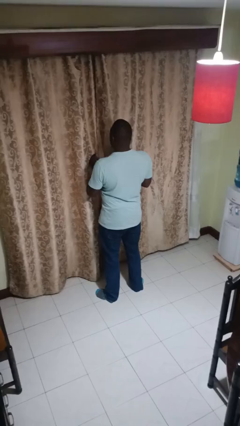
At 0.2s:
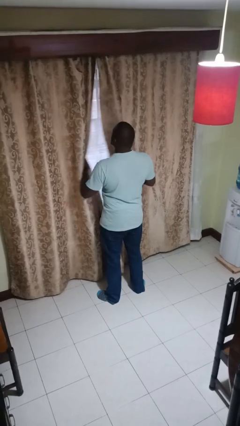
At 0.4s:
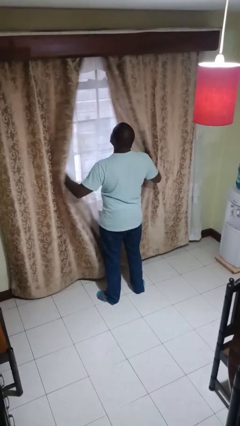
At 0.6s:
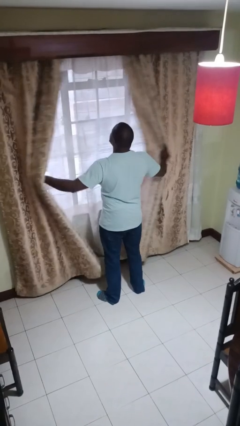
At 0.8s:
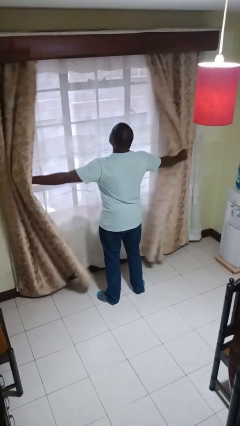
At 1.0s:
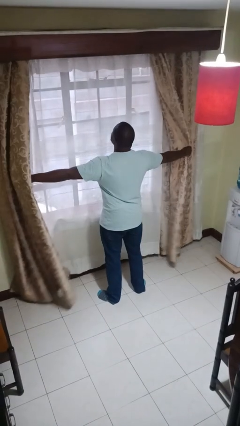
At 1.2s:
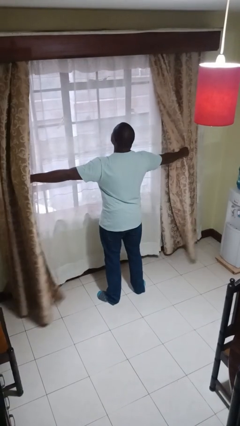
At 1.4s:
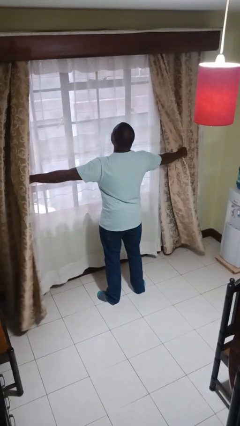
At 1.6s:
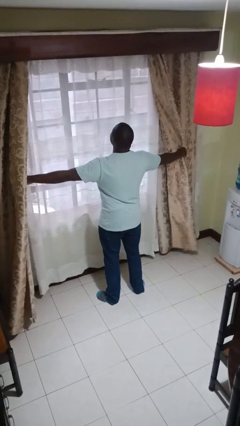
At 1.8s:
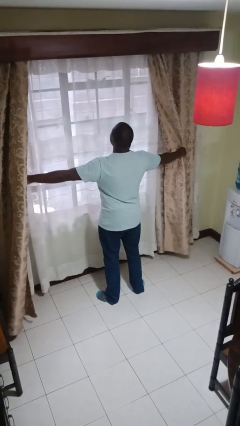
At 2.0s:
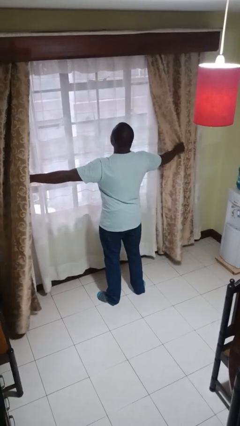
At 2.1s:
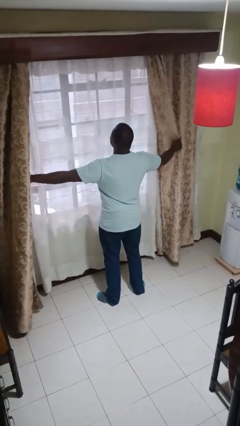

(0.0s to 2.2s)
person opens curtains

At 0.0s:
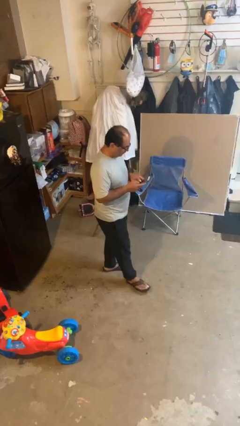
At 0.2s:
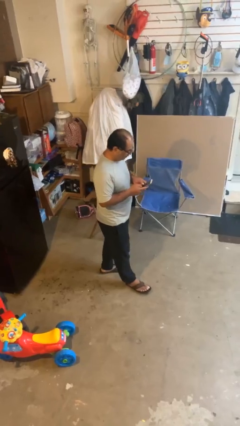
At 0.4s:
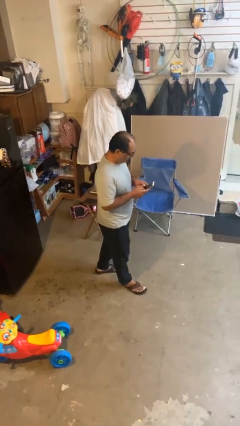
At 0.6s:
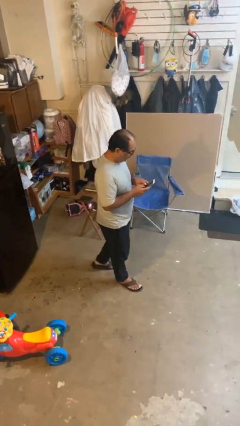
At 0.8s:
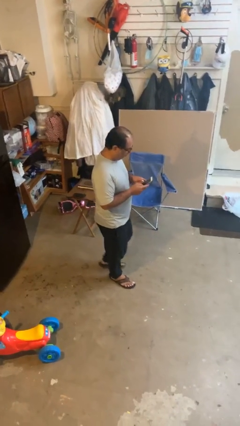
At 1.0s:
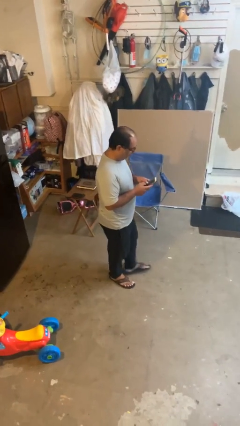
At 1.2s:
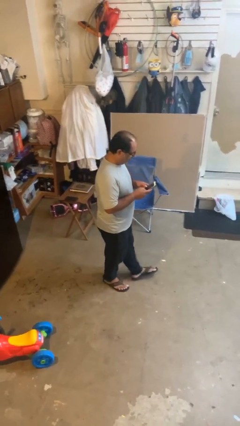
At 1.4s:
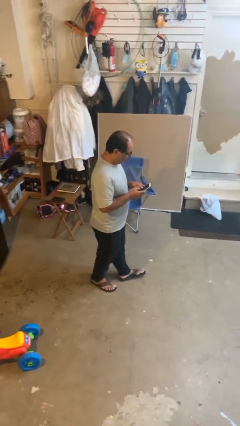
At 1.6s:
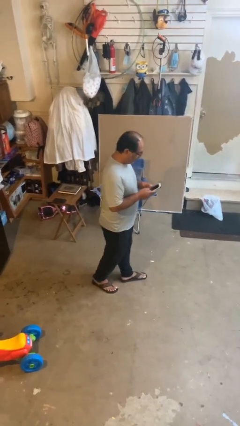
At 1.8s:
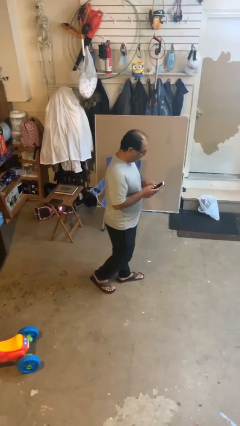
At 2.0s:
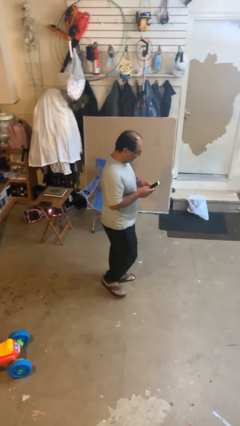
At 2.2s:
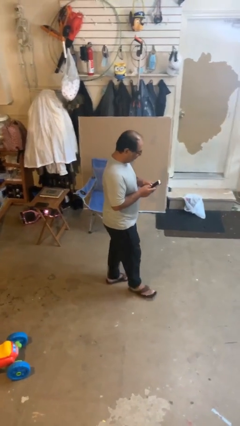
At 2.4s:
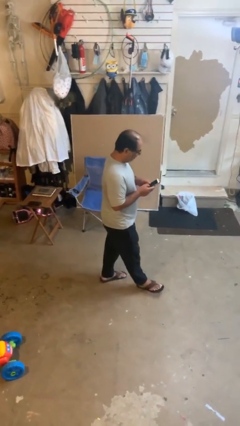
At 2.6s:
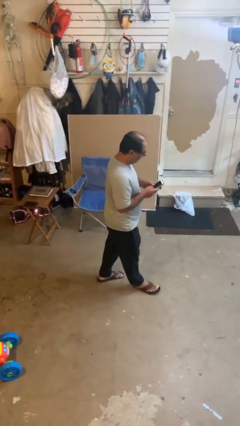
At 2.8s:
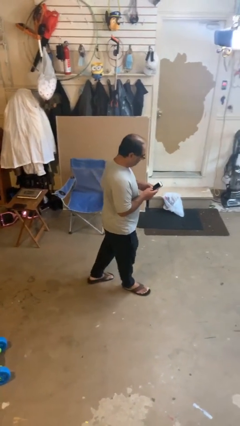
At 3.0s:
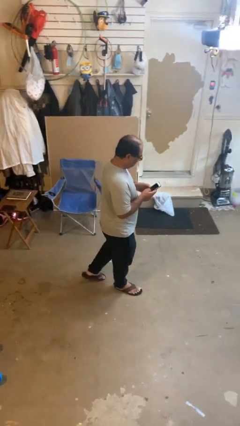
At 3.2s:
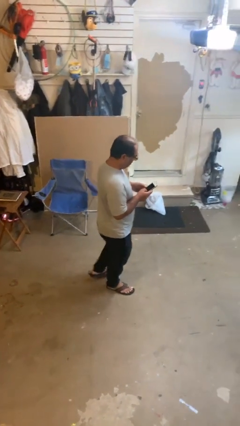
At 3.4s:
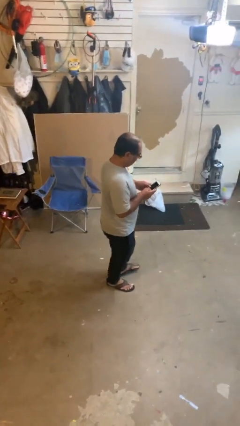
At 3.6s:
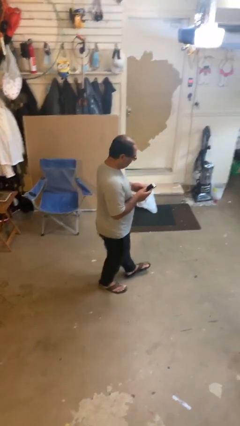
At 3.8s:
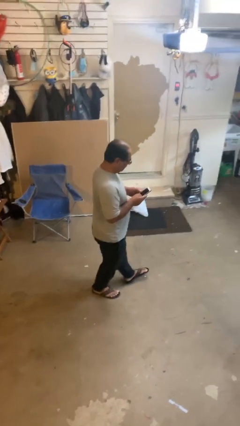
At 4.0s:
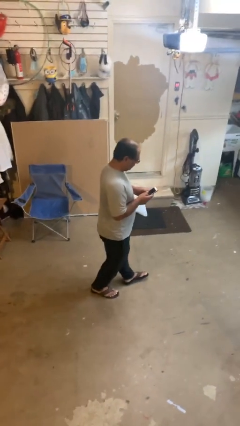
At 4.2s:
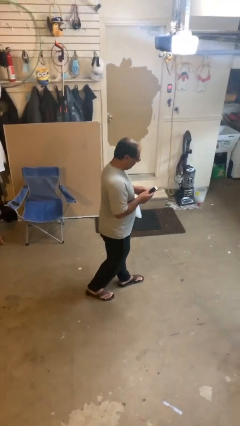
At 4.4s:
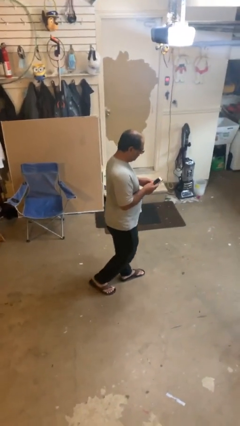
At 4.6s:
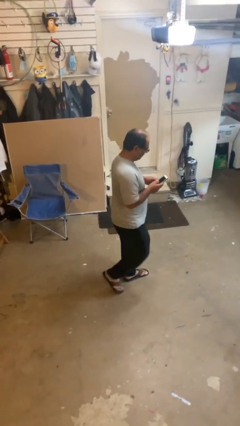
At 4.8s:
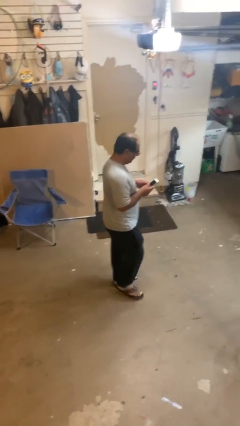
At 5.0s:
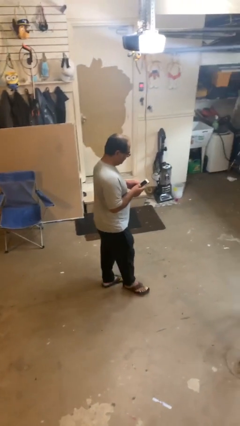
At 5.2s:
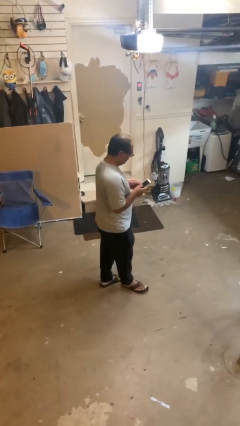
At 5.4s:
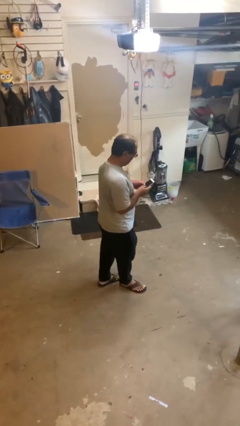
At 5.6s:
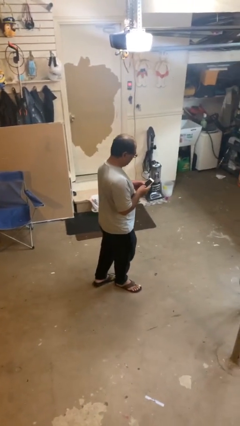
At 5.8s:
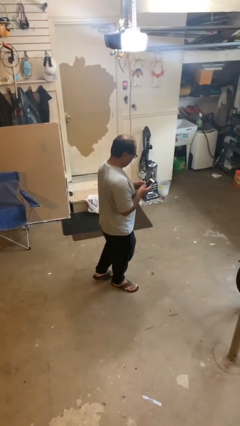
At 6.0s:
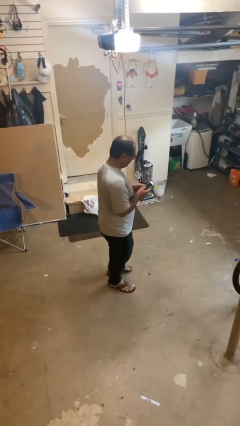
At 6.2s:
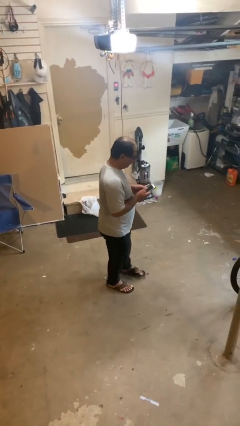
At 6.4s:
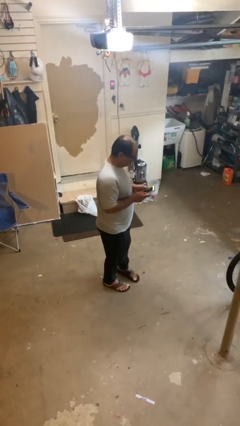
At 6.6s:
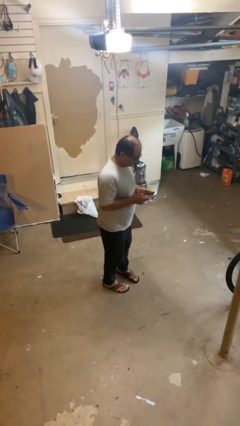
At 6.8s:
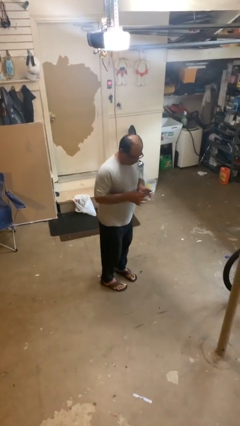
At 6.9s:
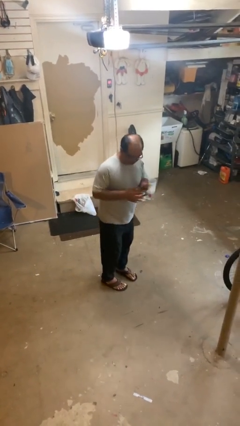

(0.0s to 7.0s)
person texts on phone

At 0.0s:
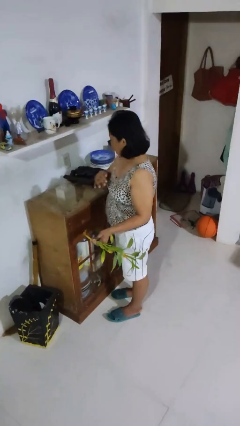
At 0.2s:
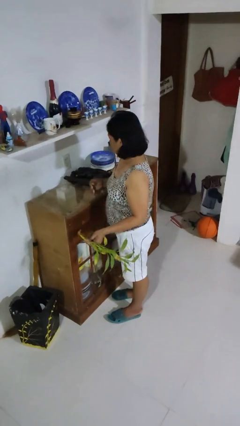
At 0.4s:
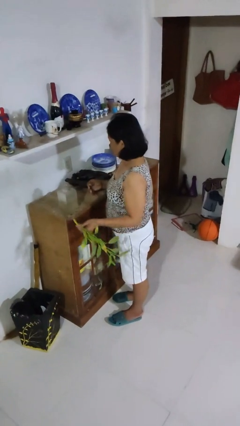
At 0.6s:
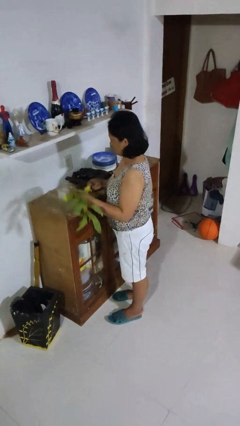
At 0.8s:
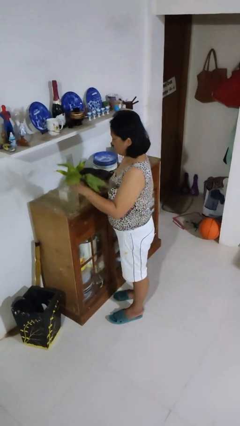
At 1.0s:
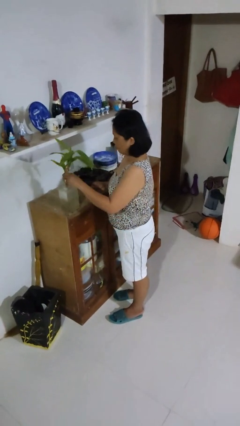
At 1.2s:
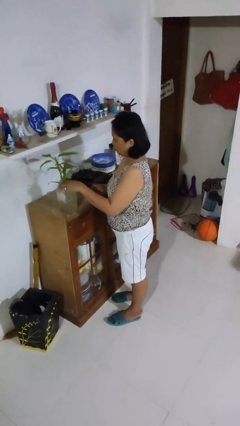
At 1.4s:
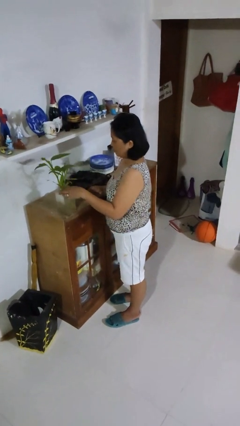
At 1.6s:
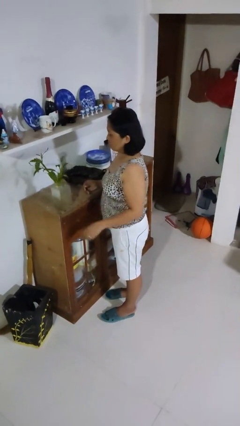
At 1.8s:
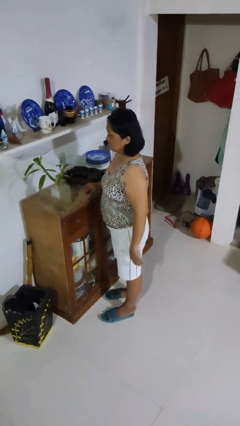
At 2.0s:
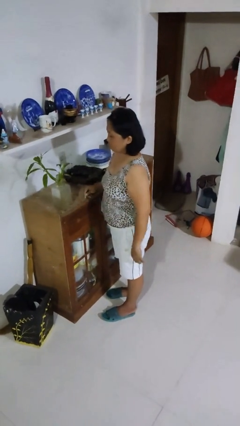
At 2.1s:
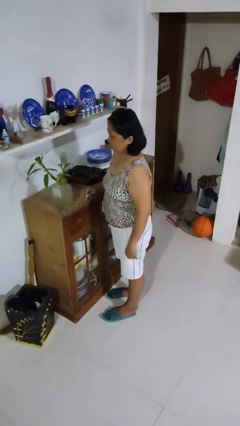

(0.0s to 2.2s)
person arranges flowers in vase

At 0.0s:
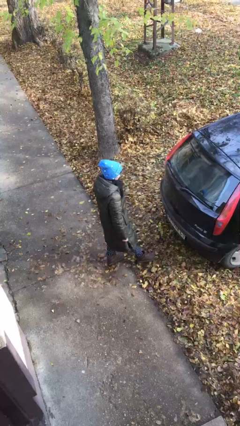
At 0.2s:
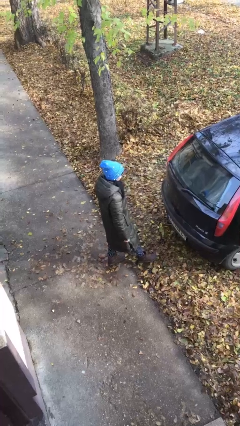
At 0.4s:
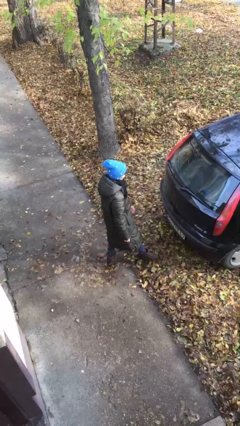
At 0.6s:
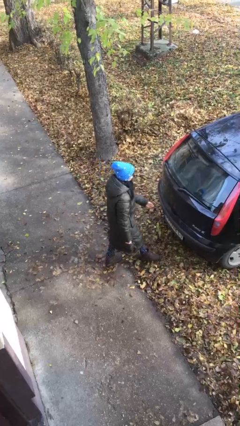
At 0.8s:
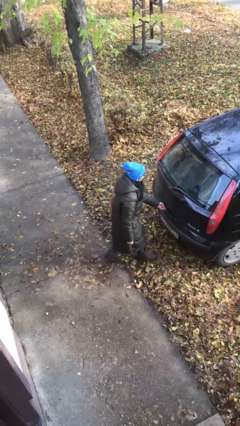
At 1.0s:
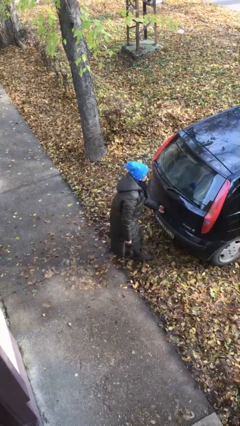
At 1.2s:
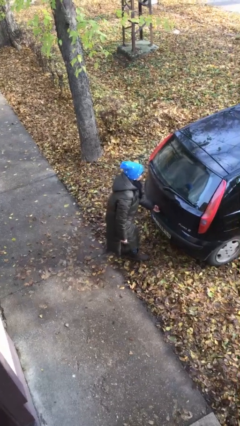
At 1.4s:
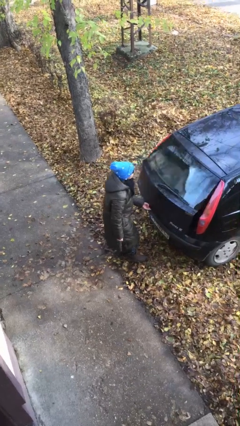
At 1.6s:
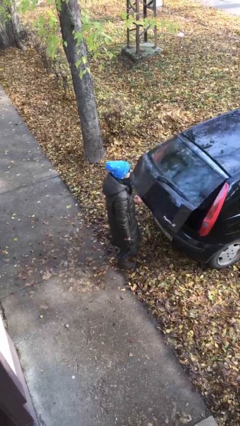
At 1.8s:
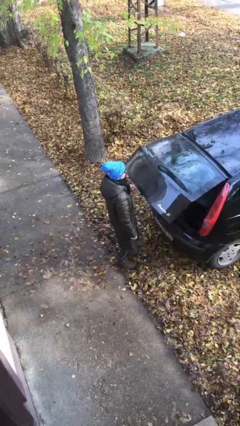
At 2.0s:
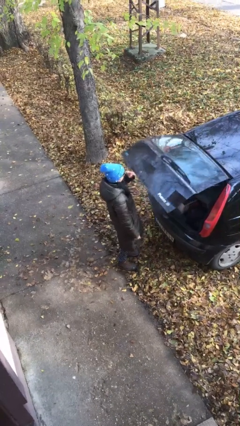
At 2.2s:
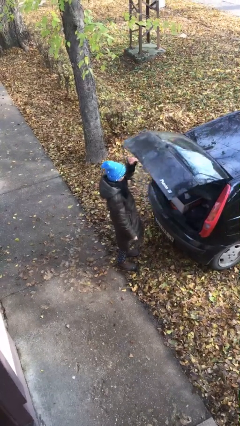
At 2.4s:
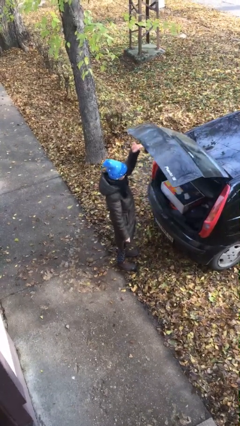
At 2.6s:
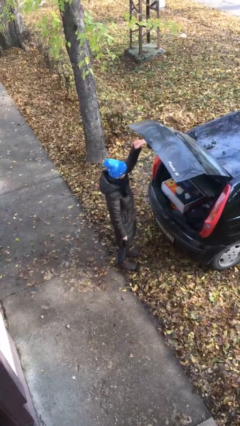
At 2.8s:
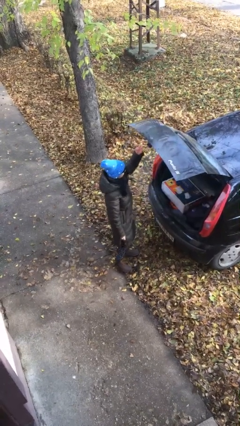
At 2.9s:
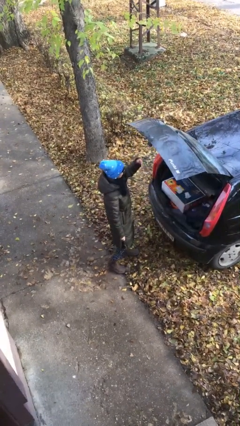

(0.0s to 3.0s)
person opens car trunk

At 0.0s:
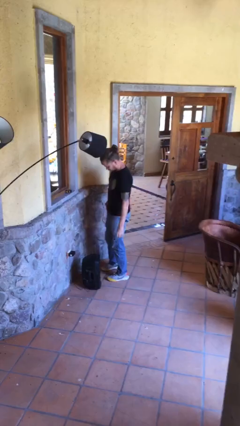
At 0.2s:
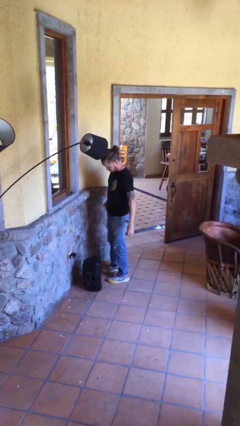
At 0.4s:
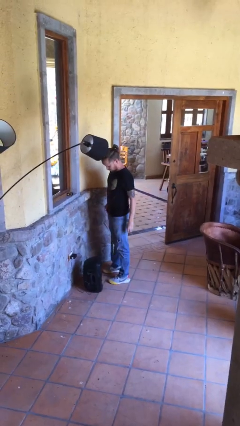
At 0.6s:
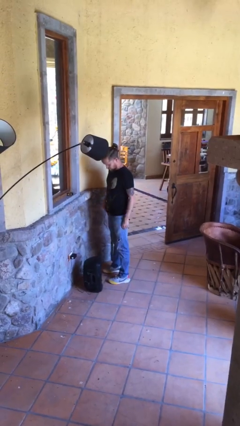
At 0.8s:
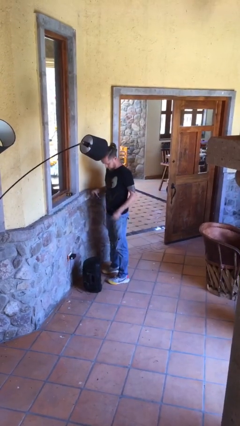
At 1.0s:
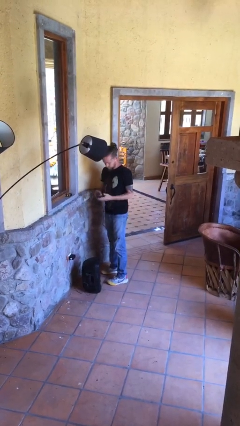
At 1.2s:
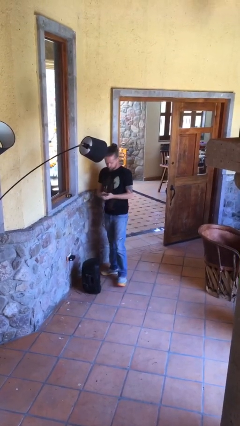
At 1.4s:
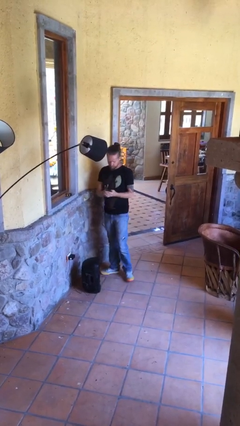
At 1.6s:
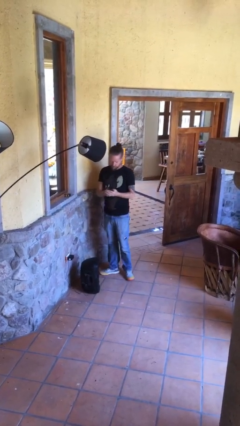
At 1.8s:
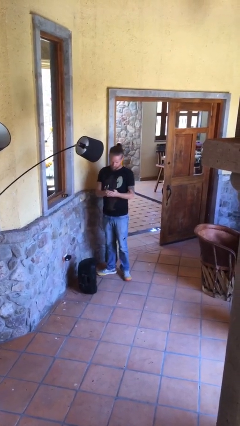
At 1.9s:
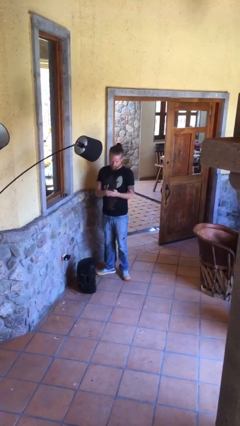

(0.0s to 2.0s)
person takes phone from pocket

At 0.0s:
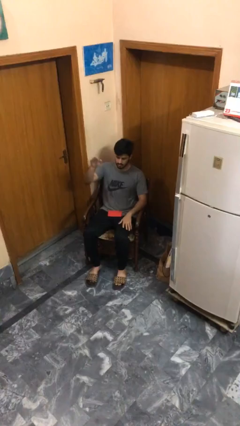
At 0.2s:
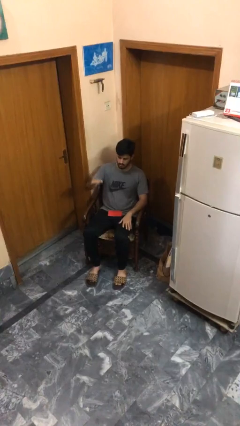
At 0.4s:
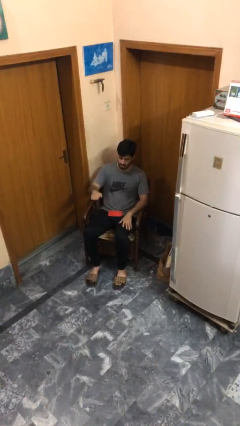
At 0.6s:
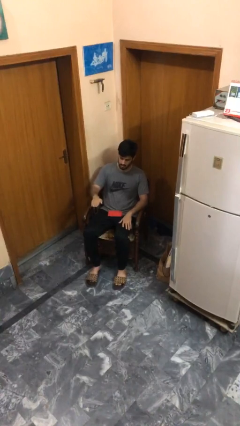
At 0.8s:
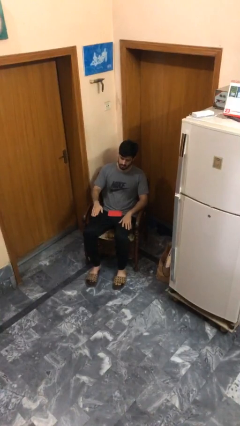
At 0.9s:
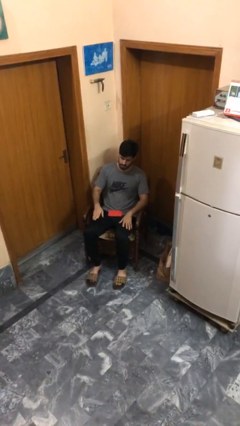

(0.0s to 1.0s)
person gestures swipe down
